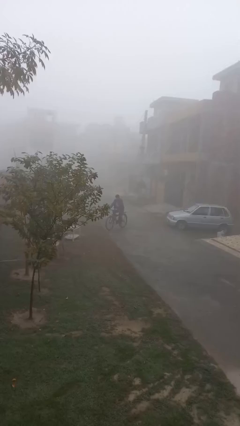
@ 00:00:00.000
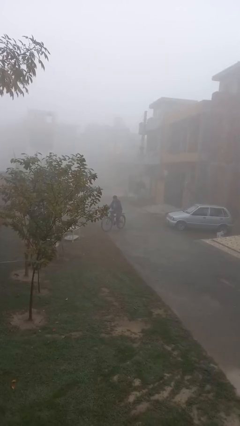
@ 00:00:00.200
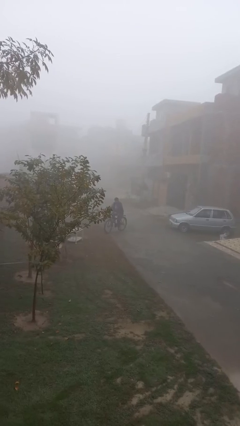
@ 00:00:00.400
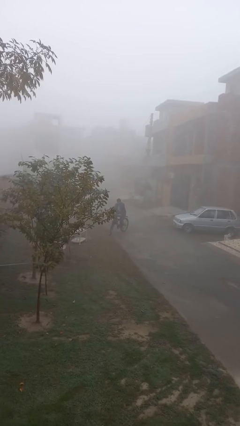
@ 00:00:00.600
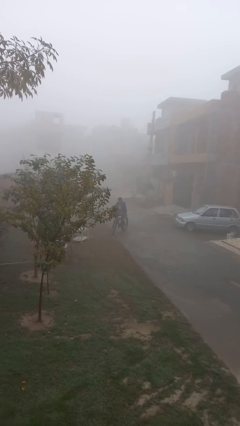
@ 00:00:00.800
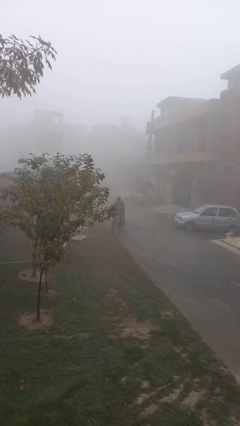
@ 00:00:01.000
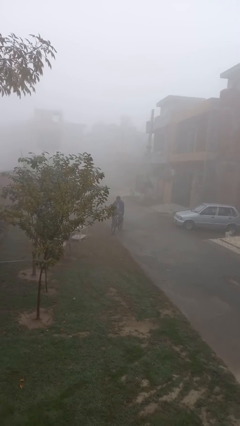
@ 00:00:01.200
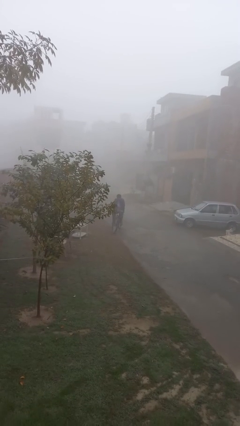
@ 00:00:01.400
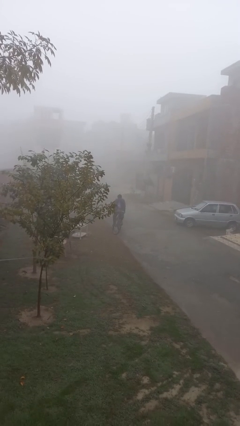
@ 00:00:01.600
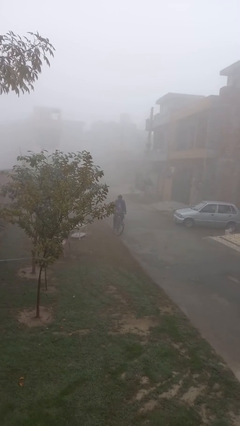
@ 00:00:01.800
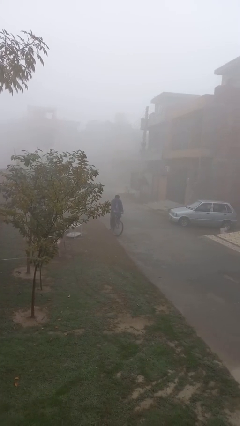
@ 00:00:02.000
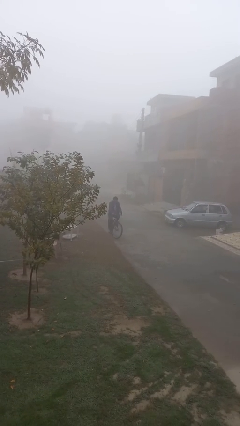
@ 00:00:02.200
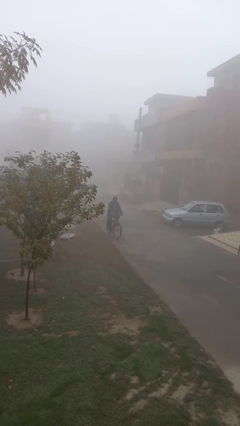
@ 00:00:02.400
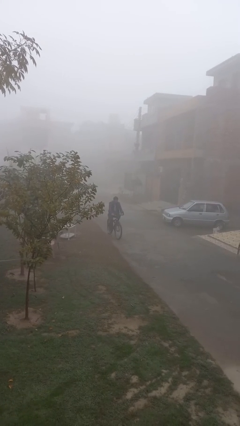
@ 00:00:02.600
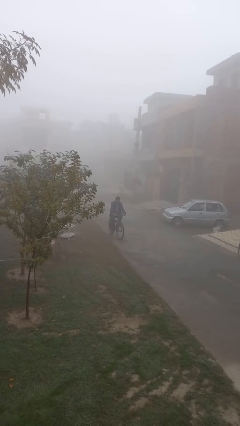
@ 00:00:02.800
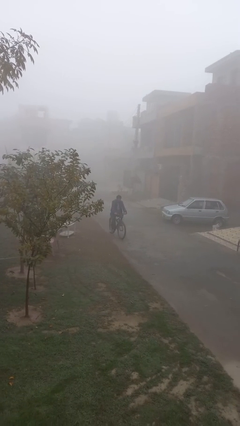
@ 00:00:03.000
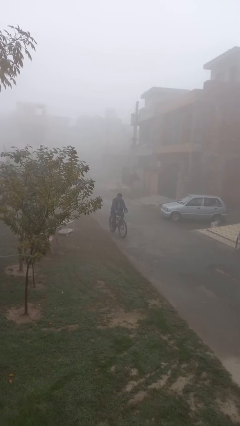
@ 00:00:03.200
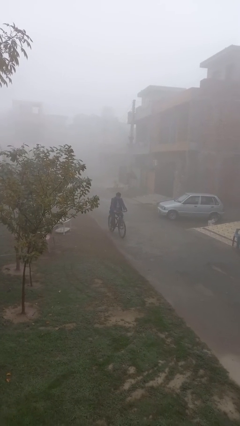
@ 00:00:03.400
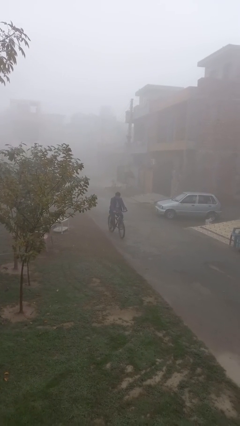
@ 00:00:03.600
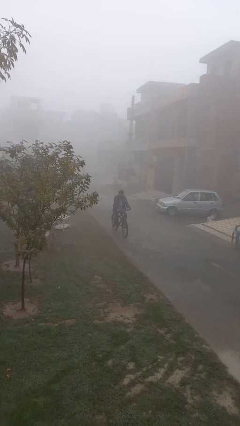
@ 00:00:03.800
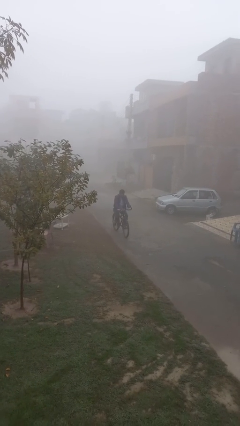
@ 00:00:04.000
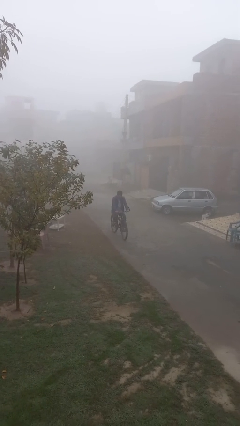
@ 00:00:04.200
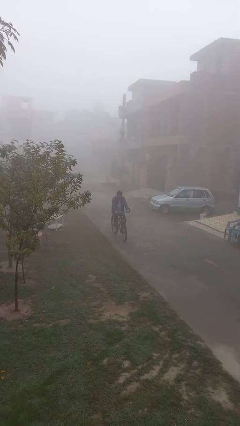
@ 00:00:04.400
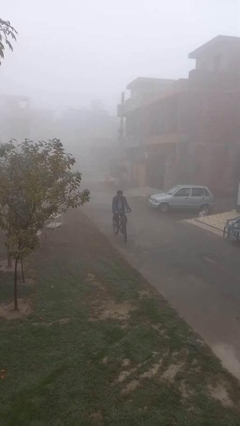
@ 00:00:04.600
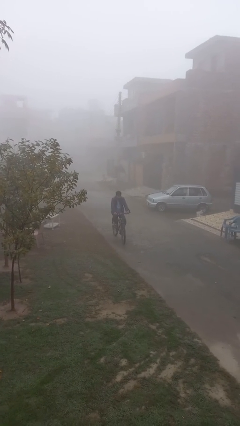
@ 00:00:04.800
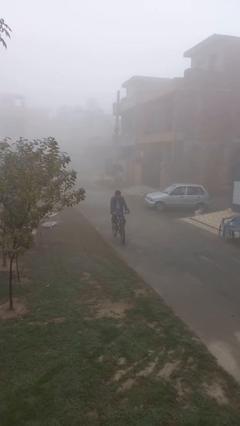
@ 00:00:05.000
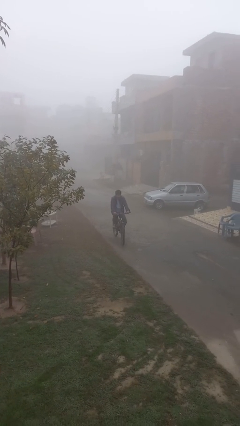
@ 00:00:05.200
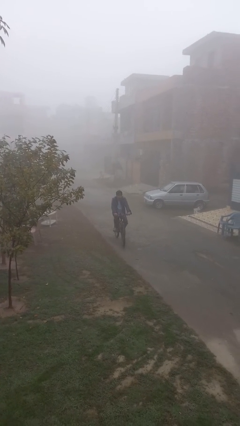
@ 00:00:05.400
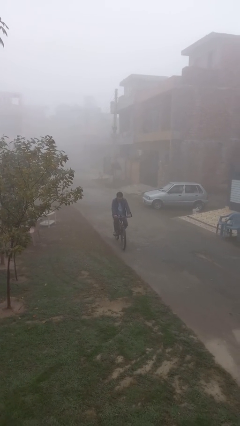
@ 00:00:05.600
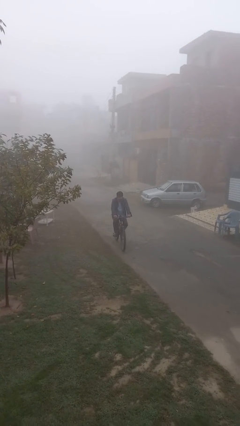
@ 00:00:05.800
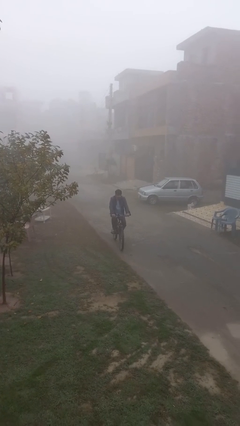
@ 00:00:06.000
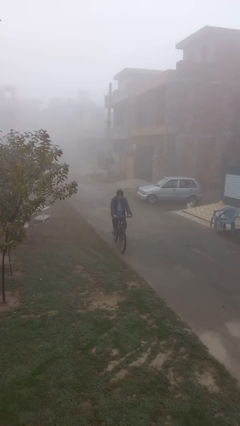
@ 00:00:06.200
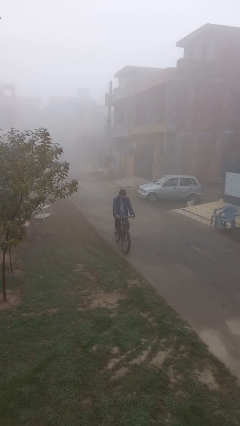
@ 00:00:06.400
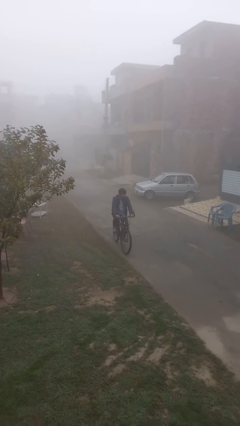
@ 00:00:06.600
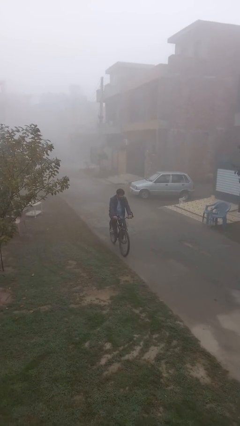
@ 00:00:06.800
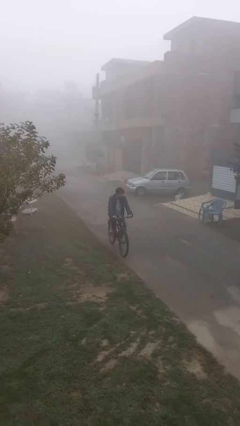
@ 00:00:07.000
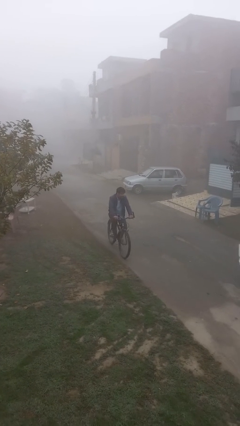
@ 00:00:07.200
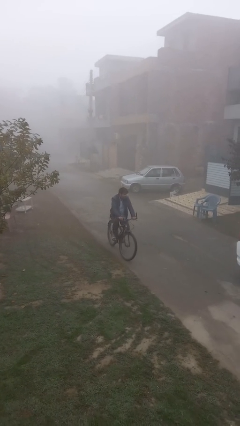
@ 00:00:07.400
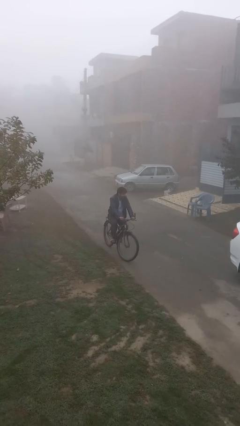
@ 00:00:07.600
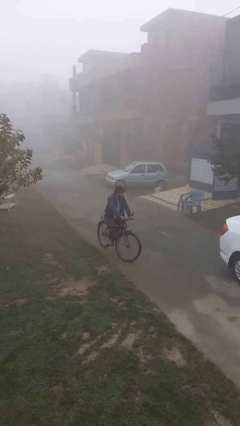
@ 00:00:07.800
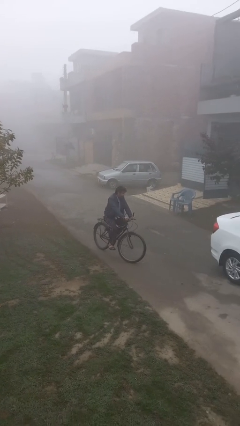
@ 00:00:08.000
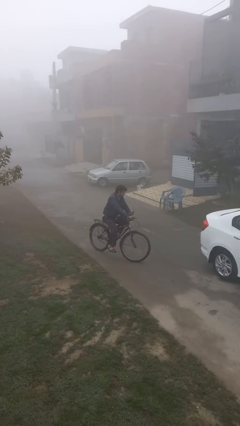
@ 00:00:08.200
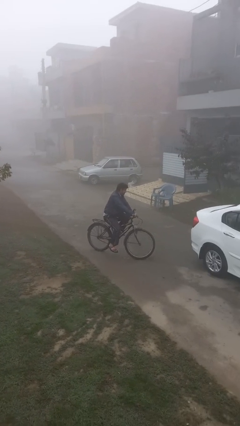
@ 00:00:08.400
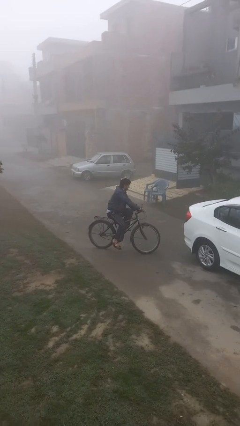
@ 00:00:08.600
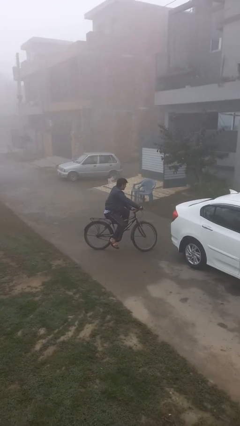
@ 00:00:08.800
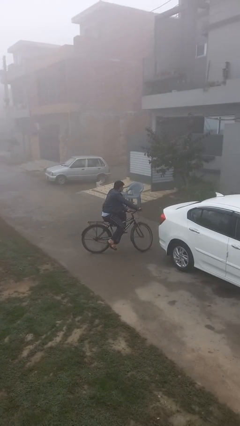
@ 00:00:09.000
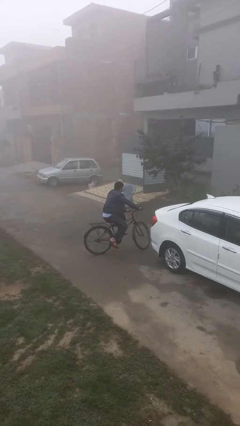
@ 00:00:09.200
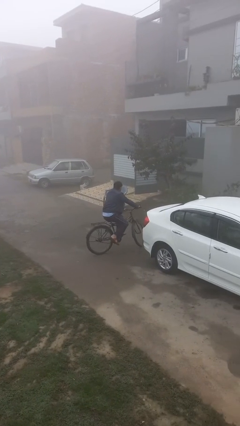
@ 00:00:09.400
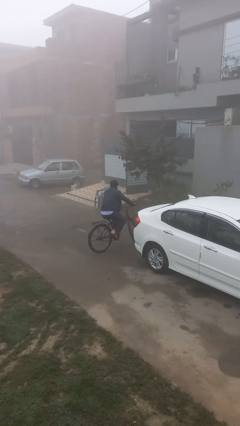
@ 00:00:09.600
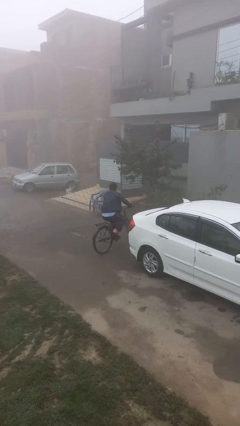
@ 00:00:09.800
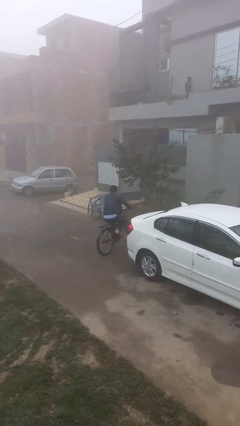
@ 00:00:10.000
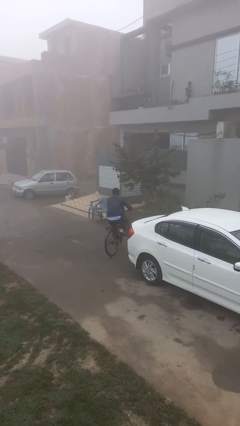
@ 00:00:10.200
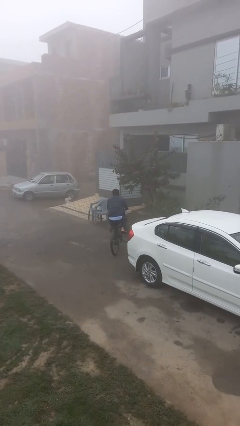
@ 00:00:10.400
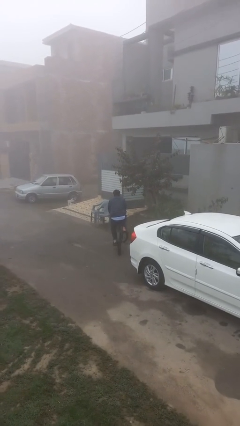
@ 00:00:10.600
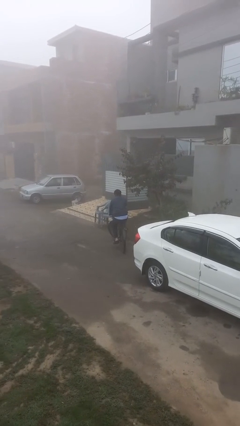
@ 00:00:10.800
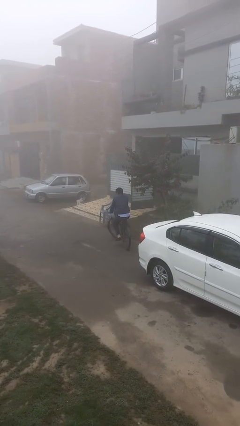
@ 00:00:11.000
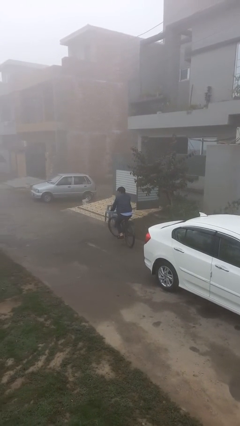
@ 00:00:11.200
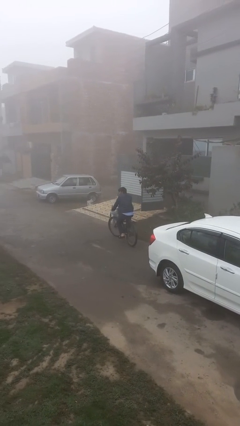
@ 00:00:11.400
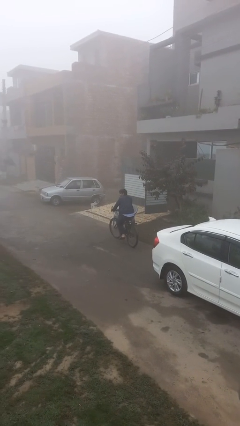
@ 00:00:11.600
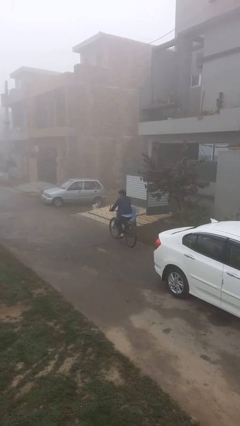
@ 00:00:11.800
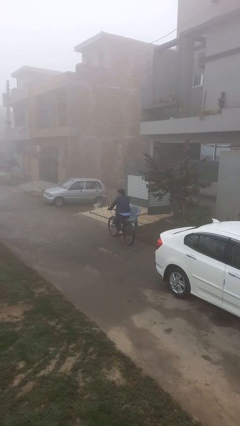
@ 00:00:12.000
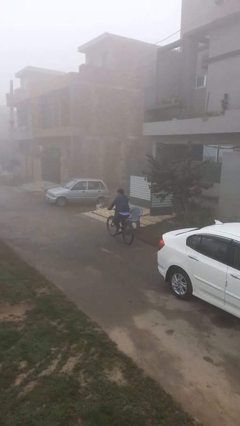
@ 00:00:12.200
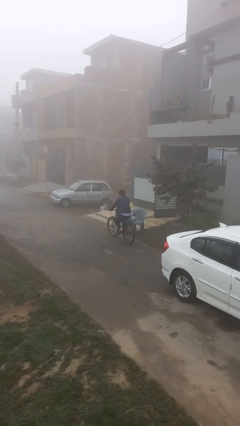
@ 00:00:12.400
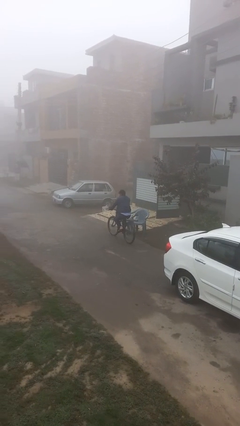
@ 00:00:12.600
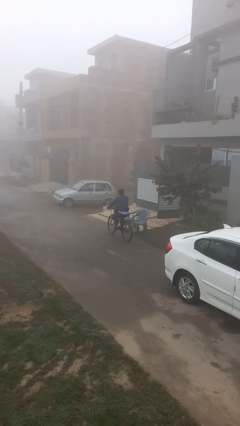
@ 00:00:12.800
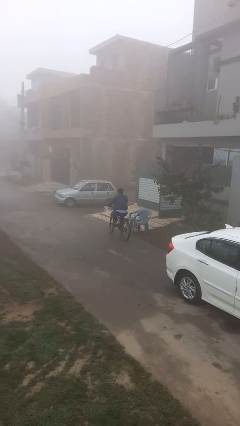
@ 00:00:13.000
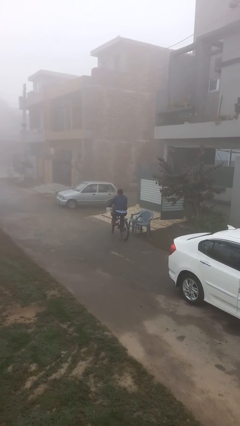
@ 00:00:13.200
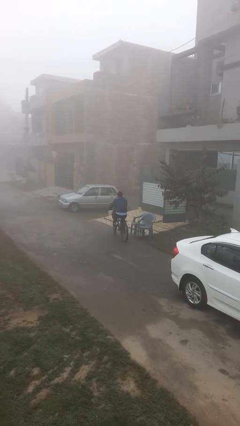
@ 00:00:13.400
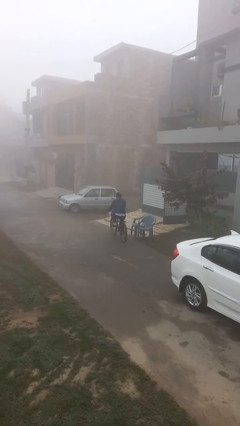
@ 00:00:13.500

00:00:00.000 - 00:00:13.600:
person rides bicycle

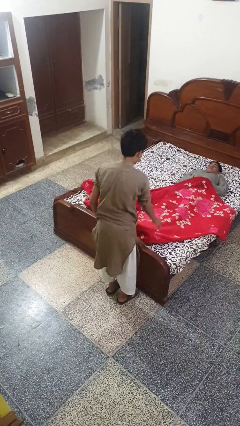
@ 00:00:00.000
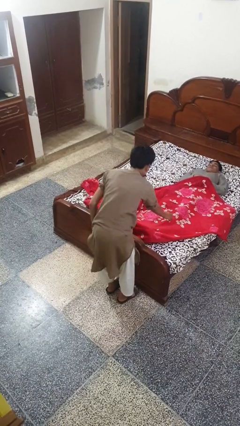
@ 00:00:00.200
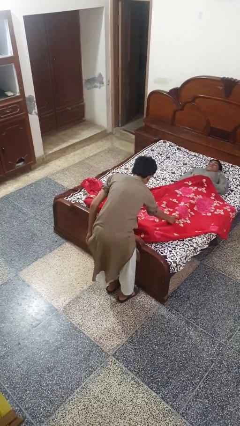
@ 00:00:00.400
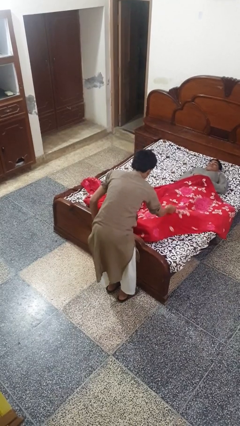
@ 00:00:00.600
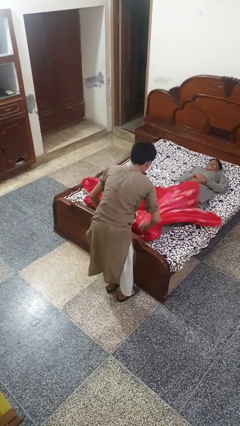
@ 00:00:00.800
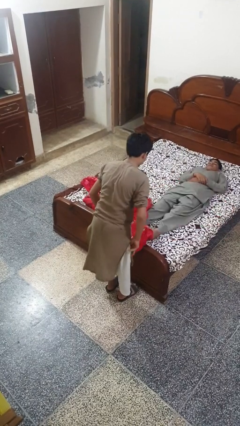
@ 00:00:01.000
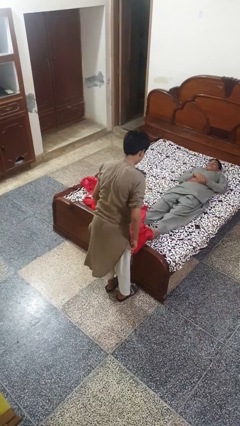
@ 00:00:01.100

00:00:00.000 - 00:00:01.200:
person uncovers friend with blanket

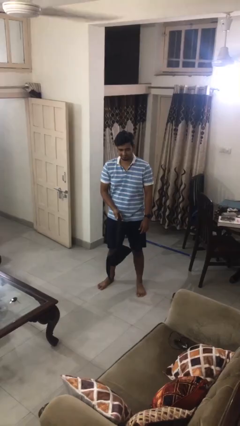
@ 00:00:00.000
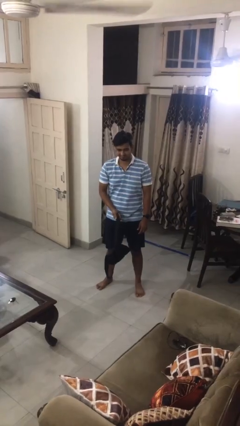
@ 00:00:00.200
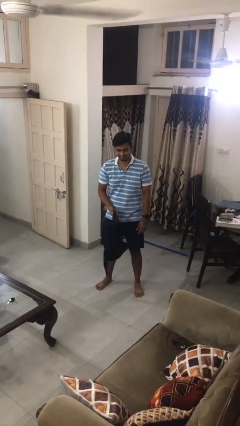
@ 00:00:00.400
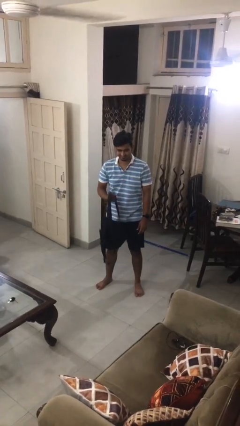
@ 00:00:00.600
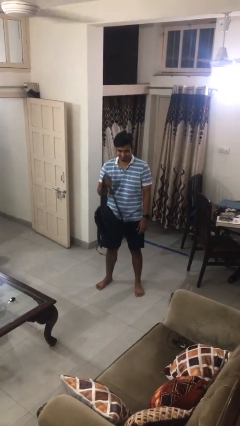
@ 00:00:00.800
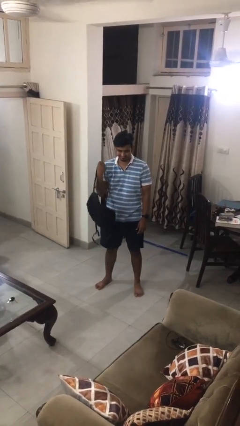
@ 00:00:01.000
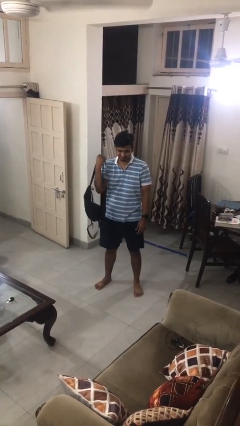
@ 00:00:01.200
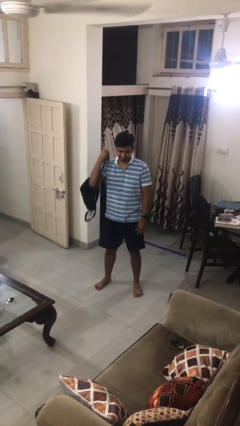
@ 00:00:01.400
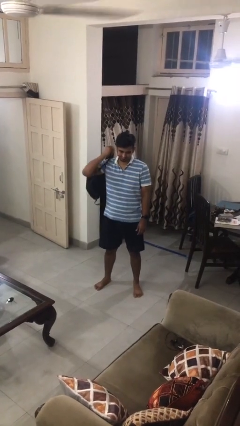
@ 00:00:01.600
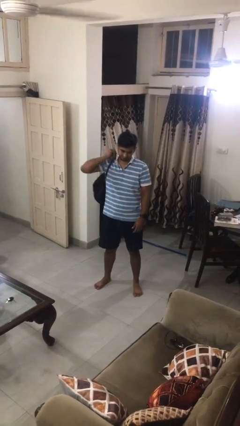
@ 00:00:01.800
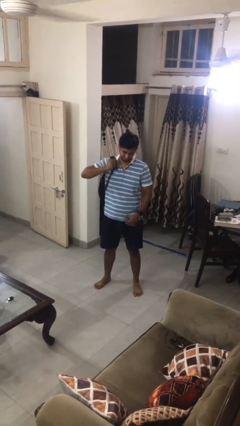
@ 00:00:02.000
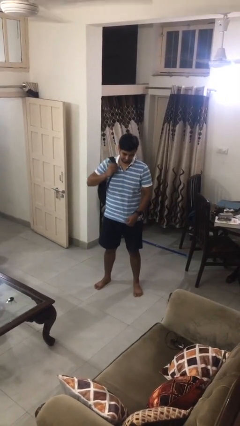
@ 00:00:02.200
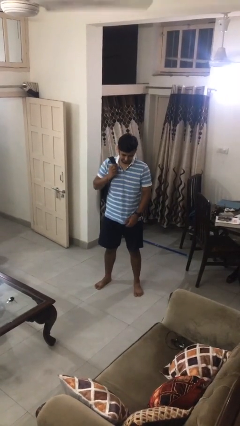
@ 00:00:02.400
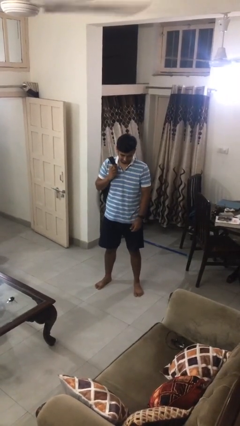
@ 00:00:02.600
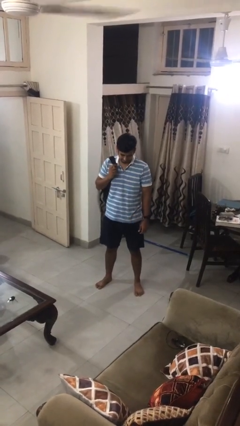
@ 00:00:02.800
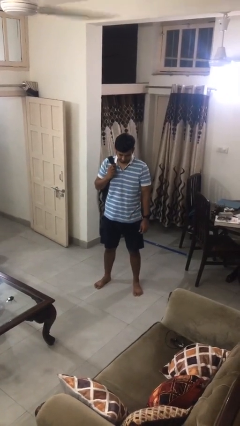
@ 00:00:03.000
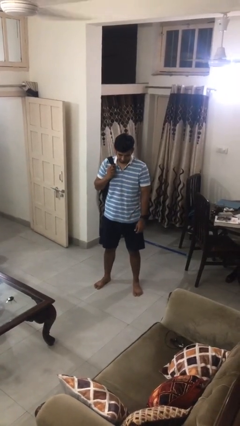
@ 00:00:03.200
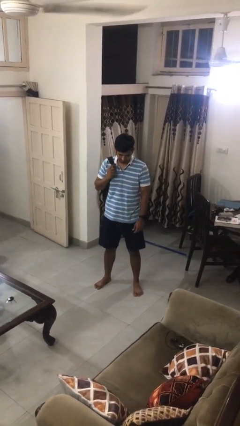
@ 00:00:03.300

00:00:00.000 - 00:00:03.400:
person puts on backpack
